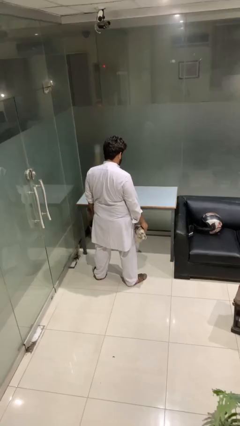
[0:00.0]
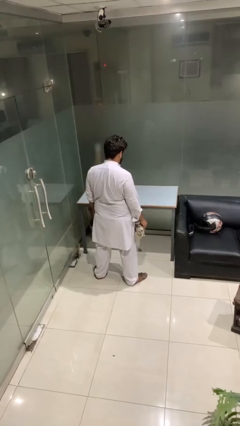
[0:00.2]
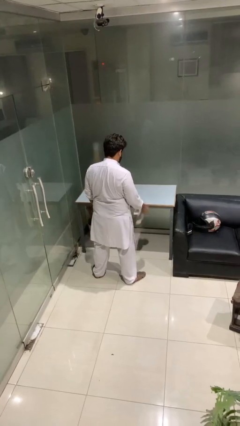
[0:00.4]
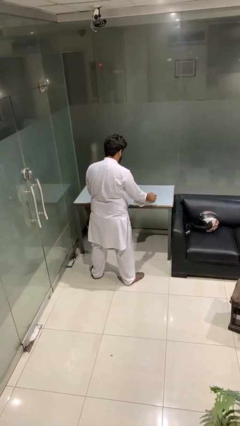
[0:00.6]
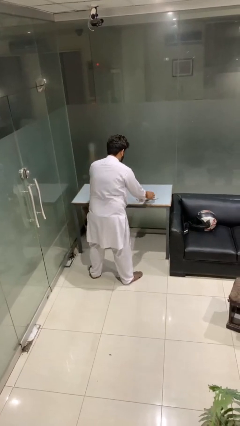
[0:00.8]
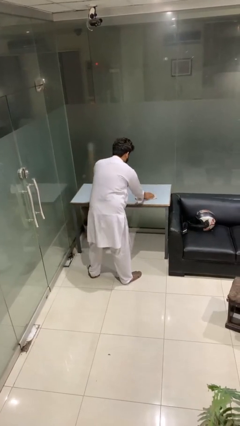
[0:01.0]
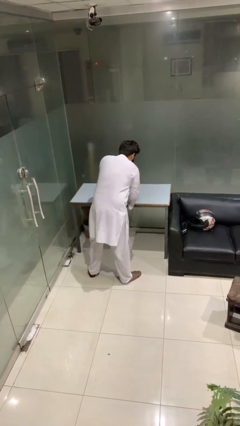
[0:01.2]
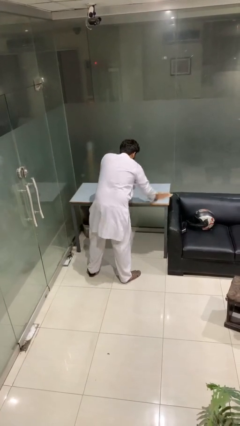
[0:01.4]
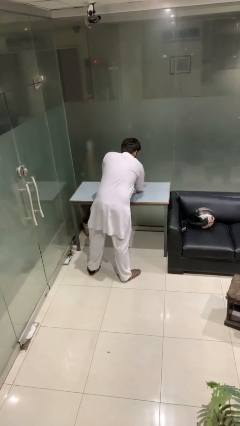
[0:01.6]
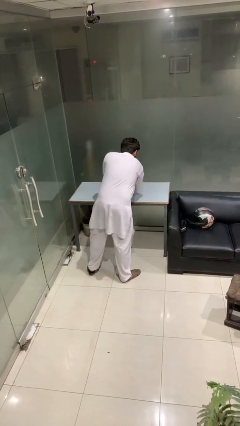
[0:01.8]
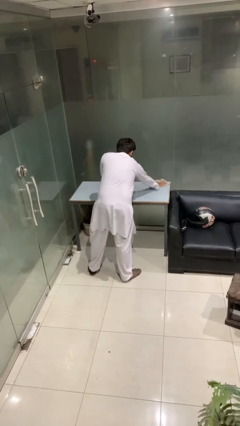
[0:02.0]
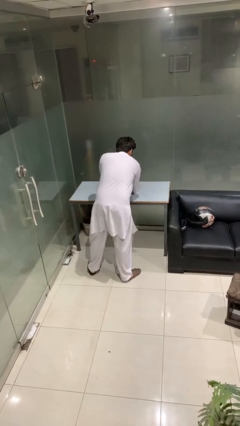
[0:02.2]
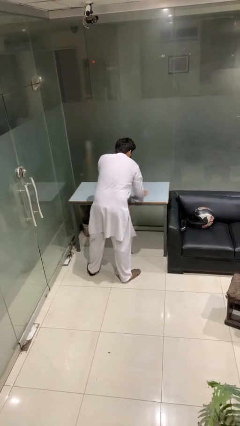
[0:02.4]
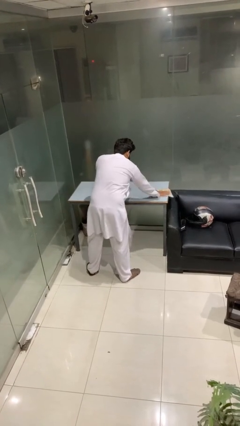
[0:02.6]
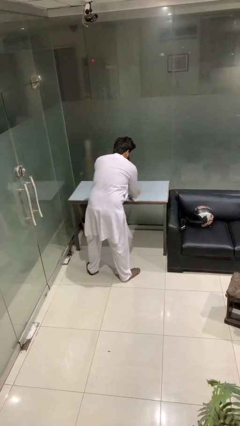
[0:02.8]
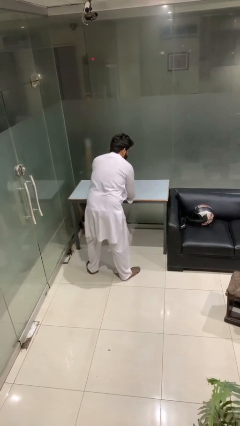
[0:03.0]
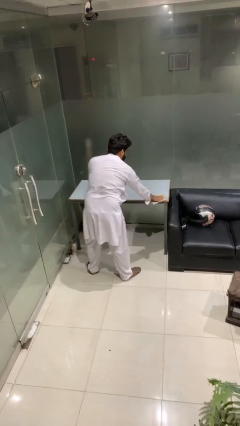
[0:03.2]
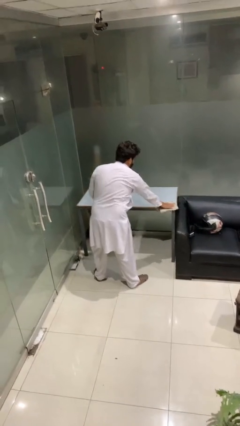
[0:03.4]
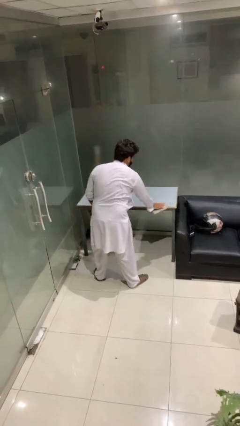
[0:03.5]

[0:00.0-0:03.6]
person cleans table with rag

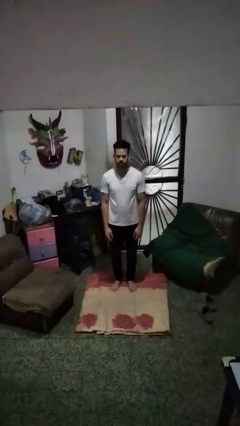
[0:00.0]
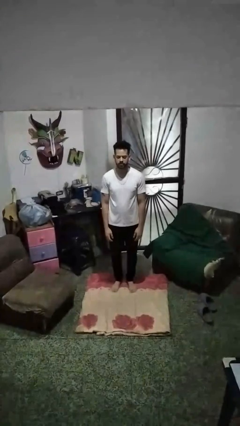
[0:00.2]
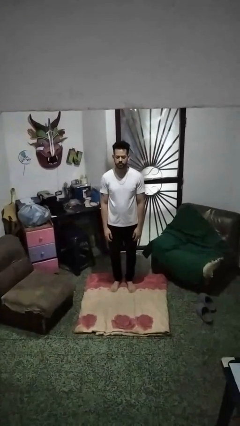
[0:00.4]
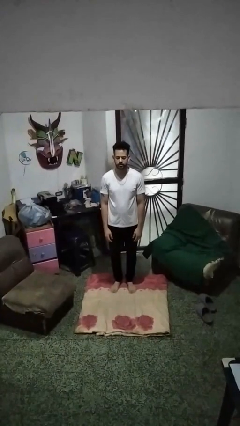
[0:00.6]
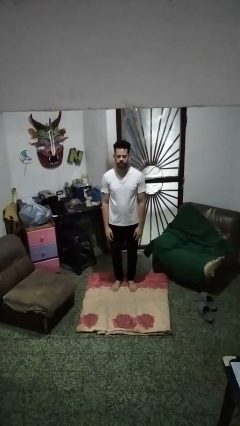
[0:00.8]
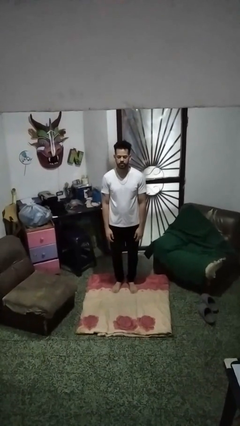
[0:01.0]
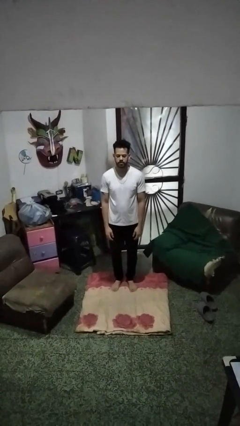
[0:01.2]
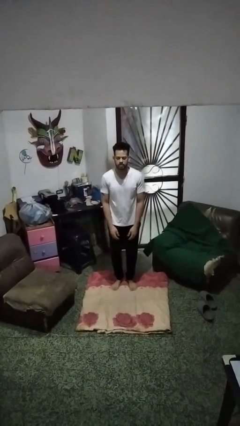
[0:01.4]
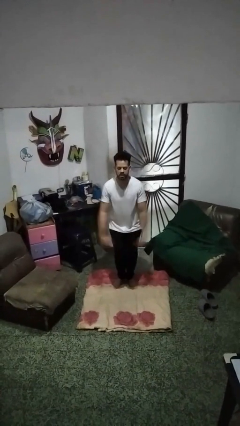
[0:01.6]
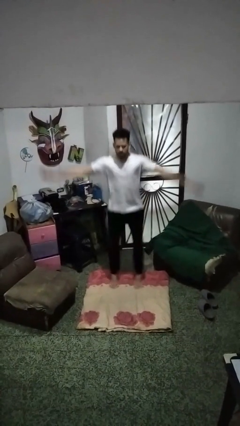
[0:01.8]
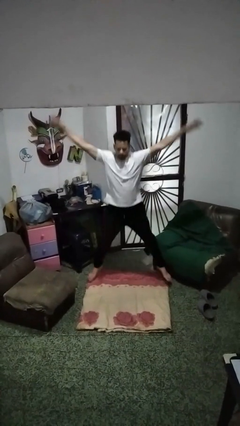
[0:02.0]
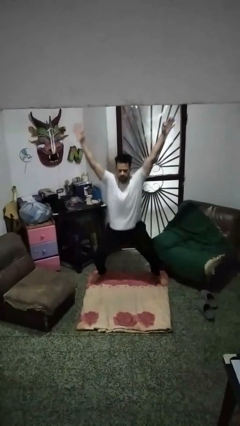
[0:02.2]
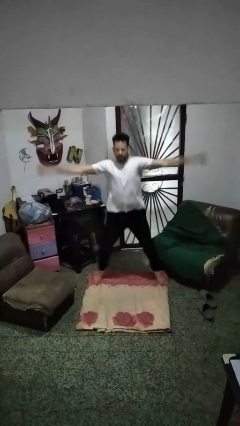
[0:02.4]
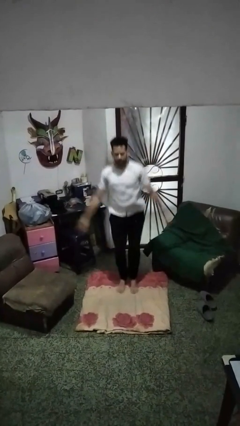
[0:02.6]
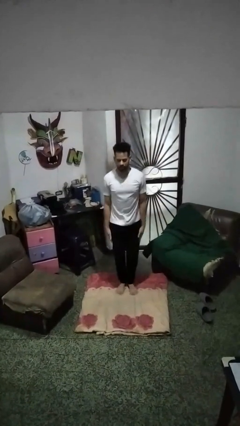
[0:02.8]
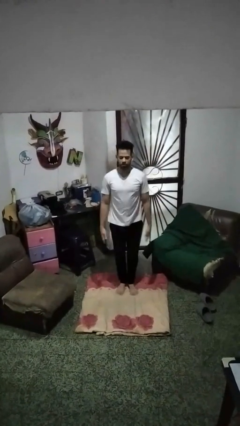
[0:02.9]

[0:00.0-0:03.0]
person exercises with jumping jacks

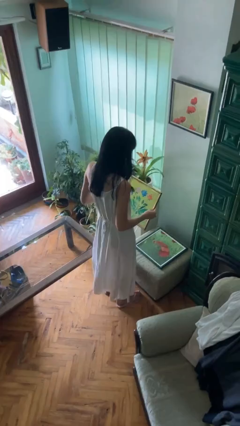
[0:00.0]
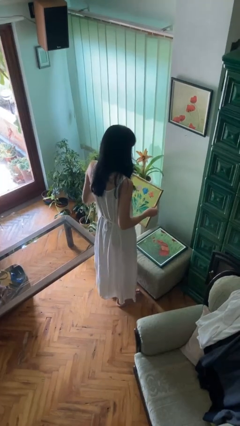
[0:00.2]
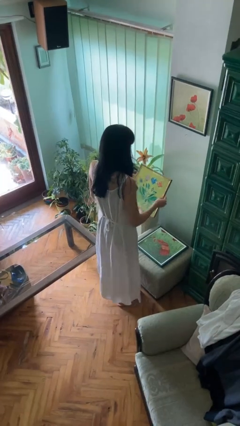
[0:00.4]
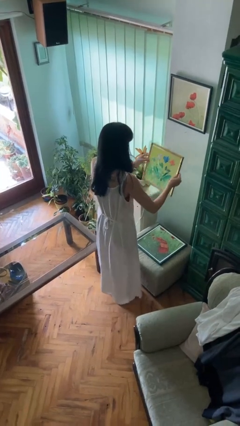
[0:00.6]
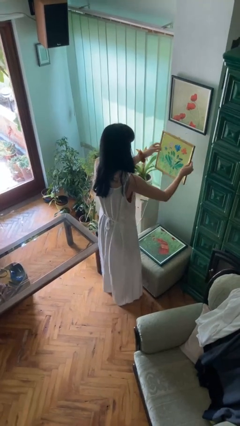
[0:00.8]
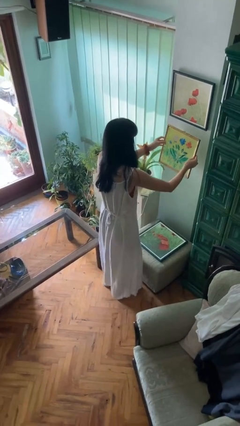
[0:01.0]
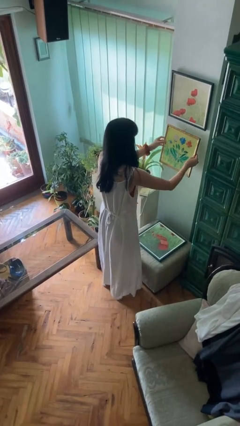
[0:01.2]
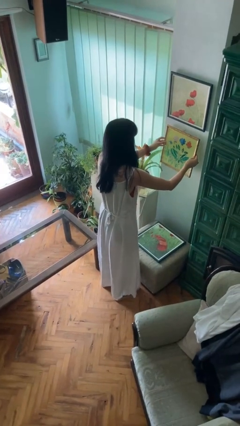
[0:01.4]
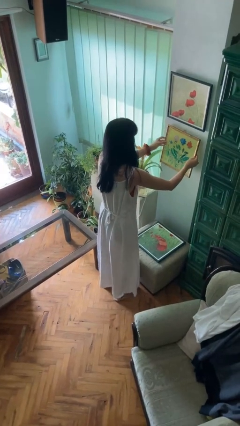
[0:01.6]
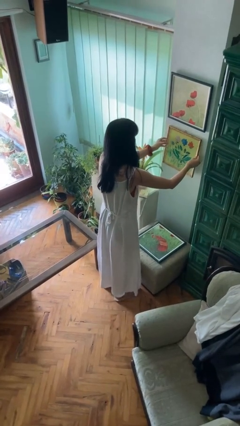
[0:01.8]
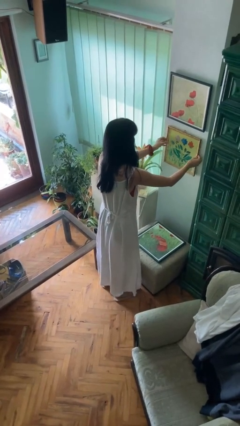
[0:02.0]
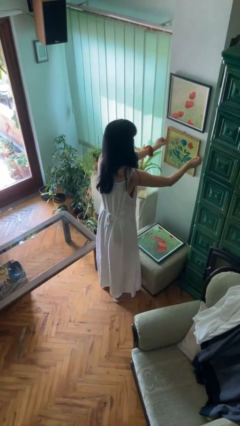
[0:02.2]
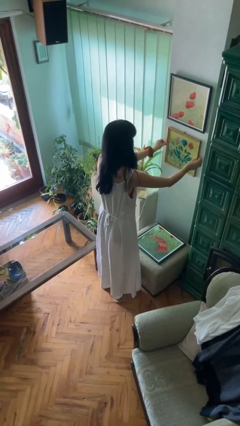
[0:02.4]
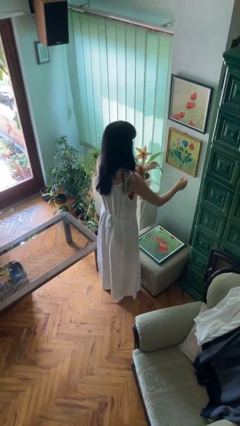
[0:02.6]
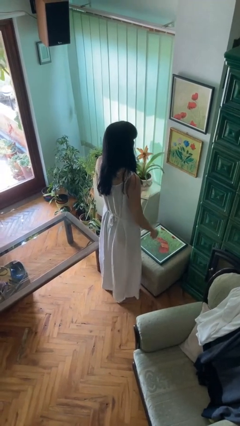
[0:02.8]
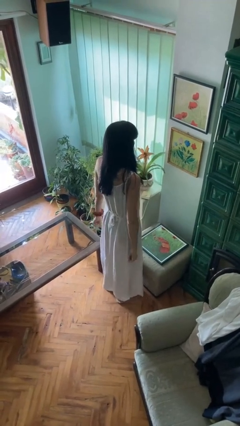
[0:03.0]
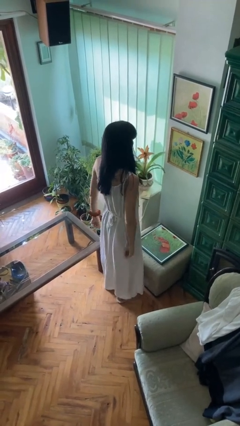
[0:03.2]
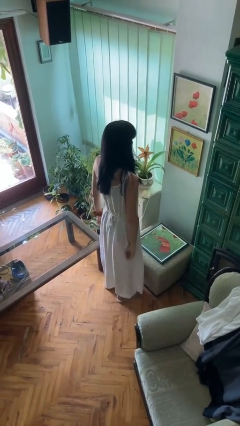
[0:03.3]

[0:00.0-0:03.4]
person puts up picture frame

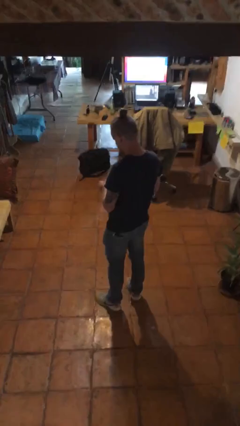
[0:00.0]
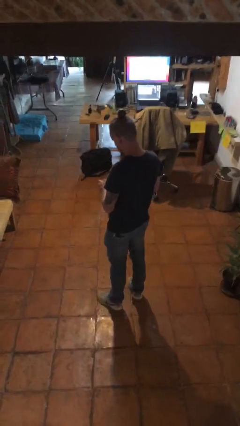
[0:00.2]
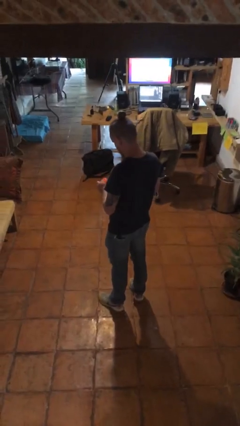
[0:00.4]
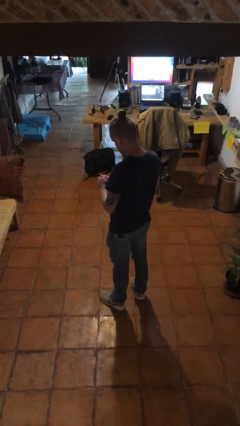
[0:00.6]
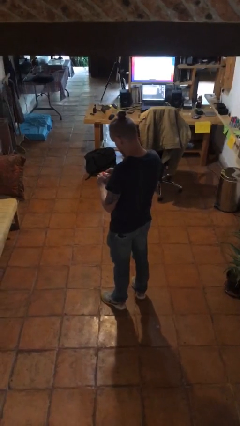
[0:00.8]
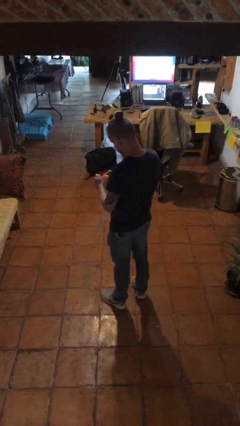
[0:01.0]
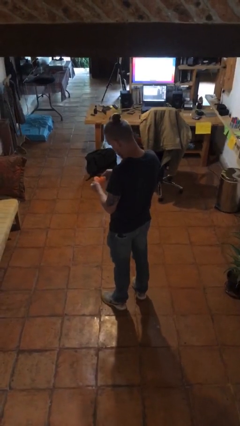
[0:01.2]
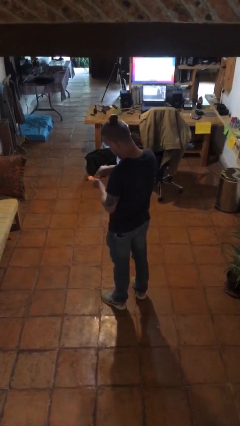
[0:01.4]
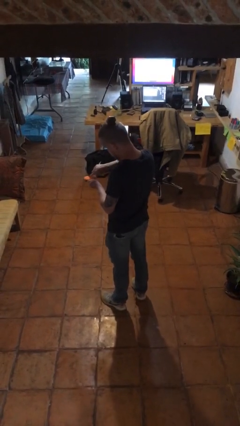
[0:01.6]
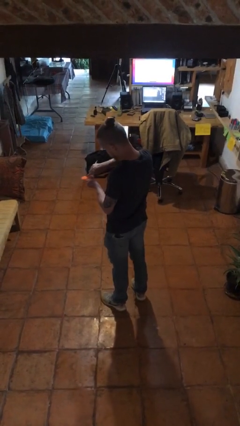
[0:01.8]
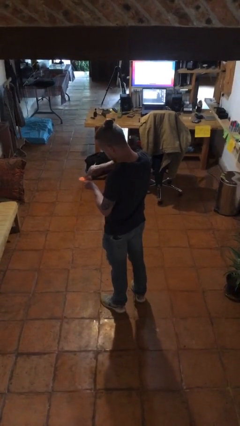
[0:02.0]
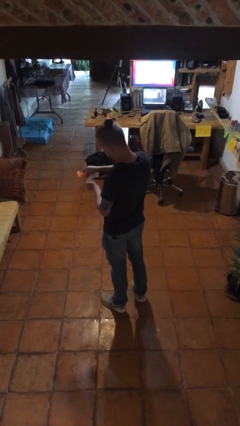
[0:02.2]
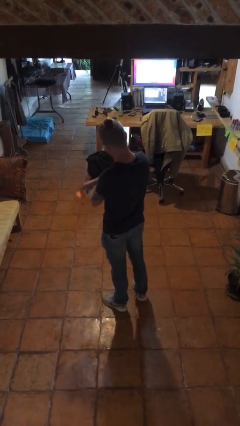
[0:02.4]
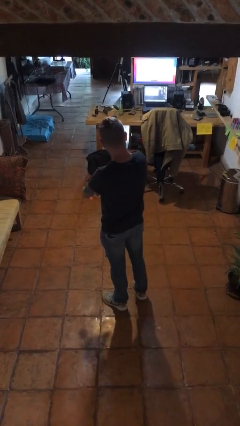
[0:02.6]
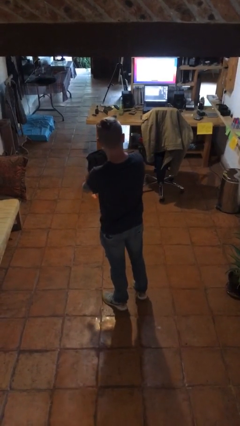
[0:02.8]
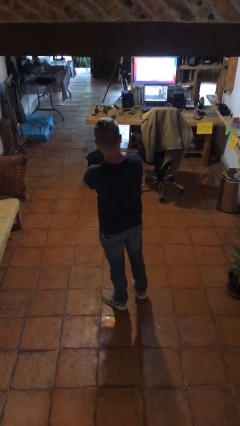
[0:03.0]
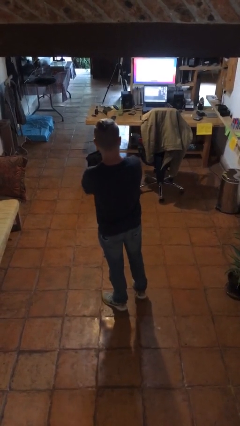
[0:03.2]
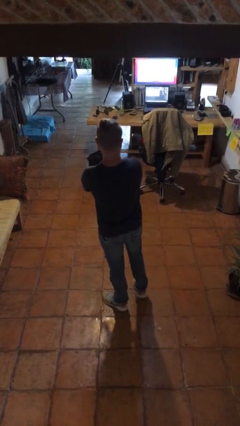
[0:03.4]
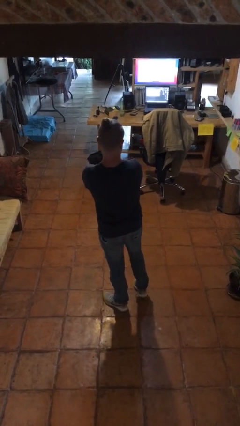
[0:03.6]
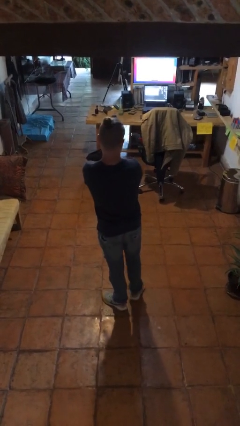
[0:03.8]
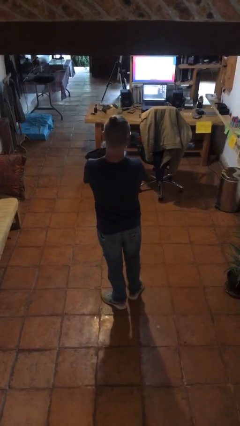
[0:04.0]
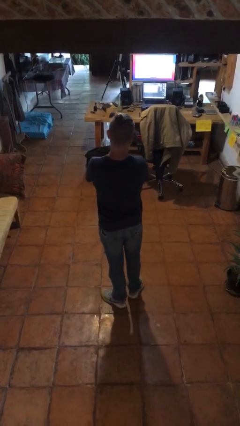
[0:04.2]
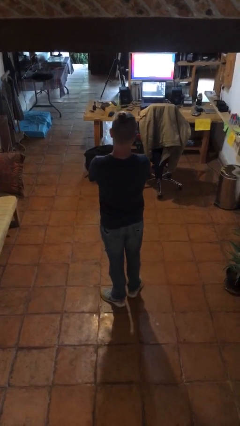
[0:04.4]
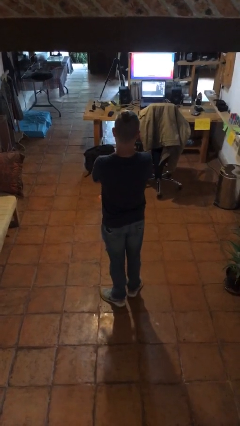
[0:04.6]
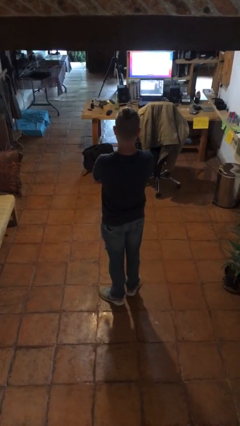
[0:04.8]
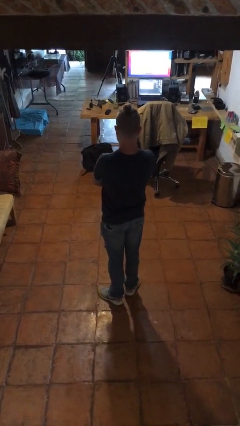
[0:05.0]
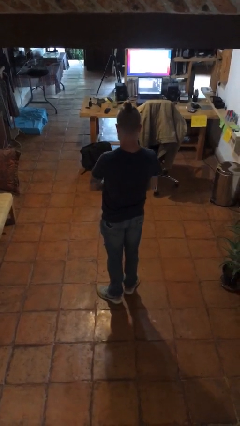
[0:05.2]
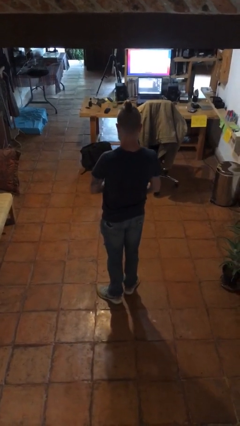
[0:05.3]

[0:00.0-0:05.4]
person applies sunscreen

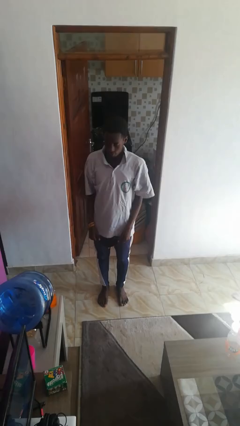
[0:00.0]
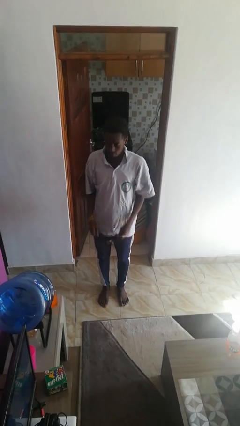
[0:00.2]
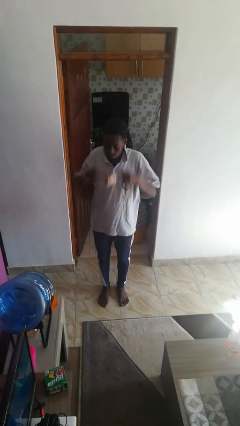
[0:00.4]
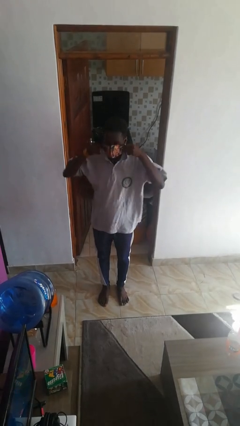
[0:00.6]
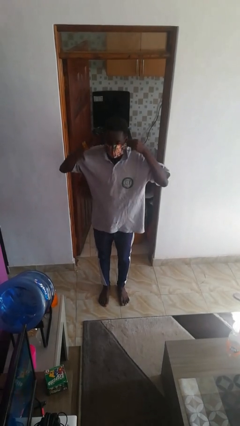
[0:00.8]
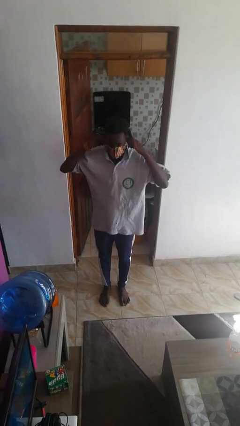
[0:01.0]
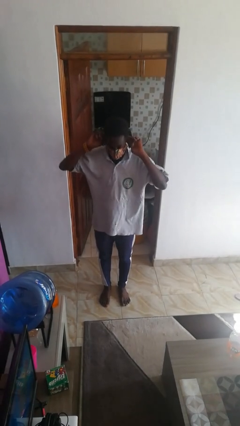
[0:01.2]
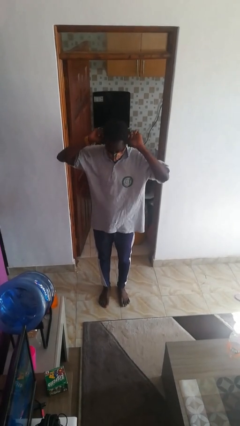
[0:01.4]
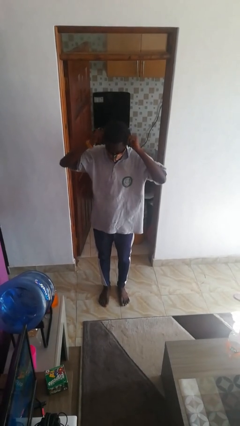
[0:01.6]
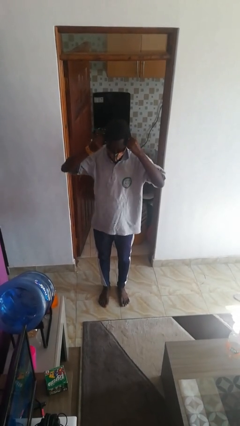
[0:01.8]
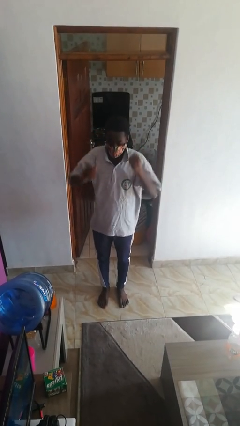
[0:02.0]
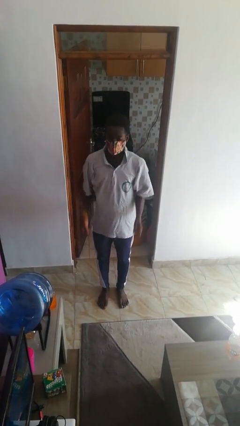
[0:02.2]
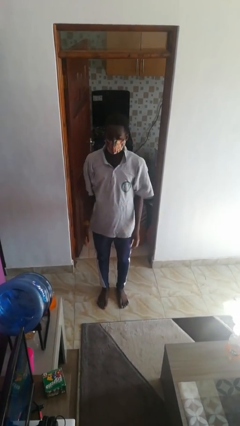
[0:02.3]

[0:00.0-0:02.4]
person puts on facemask
